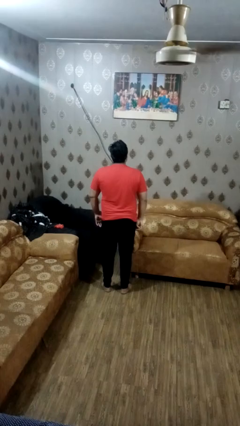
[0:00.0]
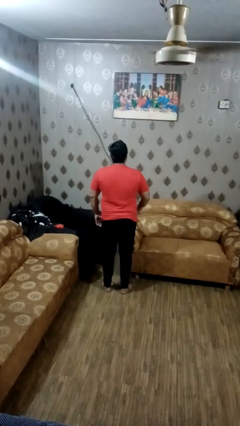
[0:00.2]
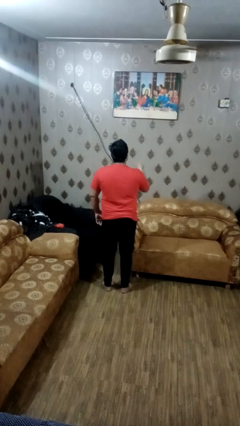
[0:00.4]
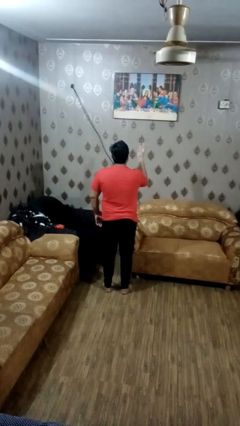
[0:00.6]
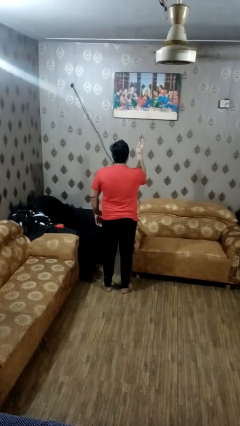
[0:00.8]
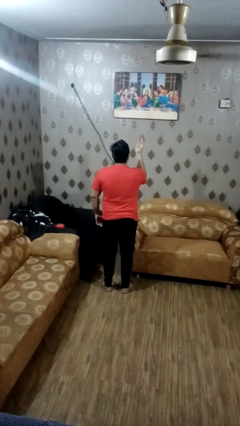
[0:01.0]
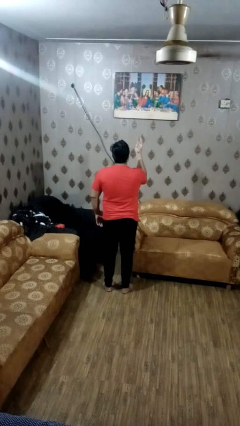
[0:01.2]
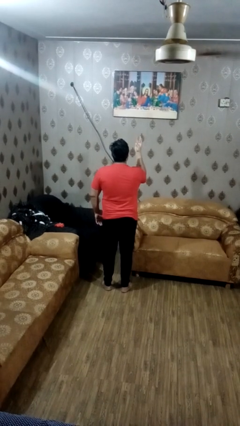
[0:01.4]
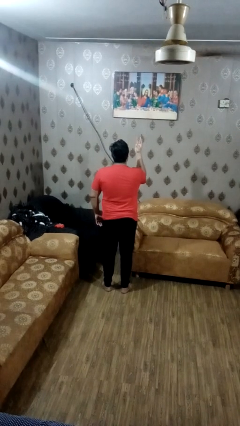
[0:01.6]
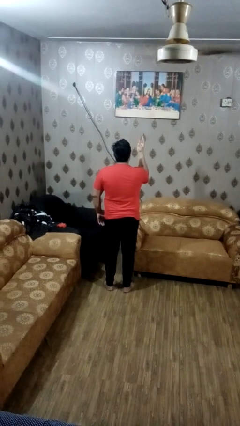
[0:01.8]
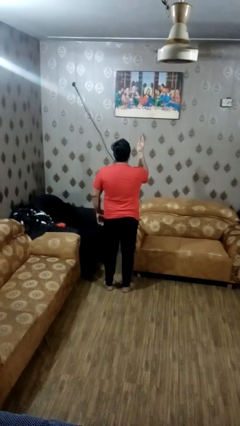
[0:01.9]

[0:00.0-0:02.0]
person gestures number three

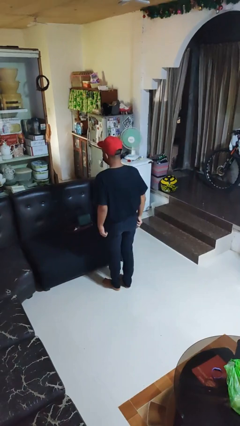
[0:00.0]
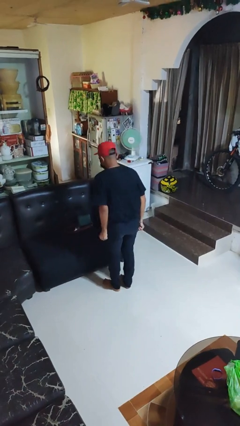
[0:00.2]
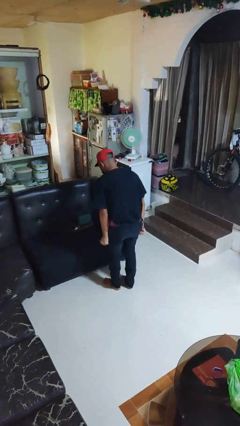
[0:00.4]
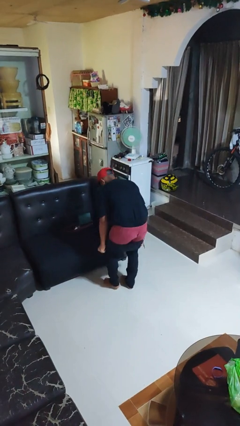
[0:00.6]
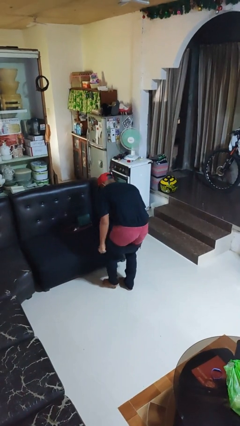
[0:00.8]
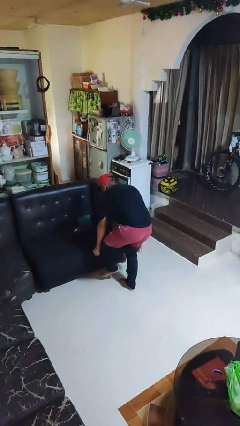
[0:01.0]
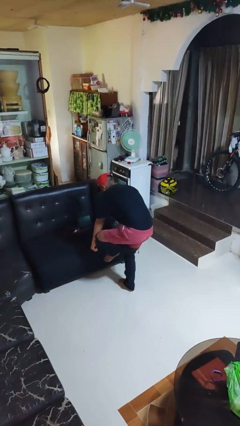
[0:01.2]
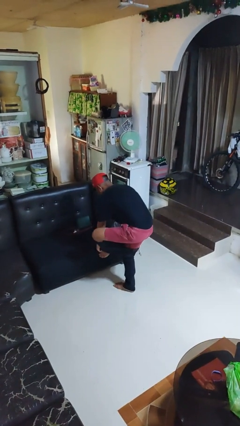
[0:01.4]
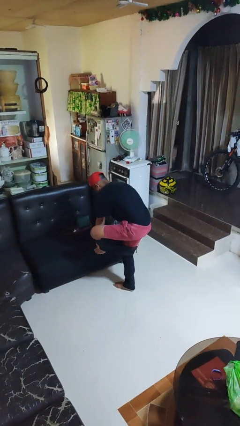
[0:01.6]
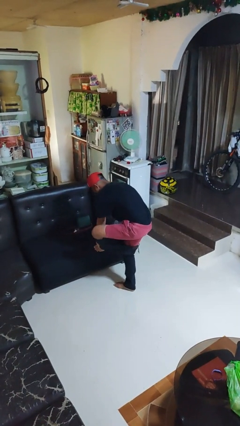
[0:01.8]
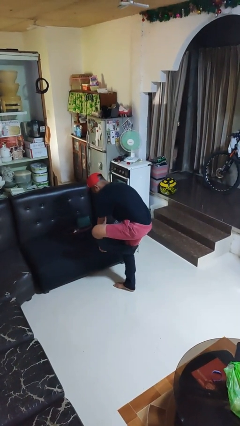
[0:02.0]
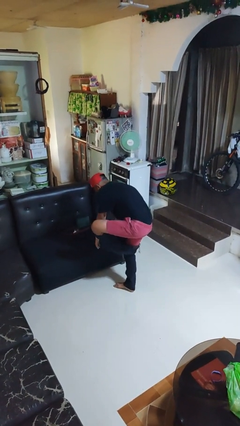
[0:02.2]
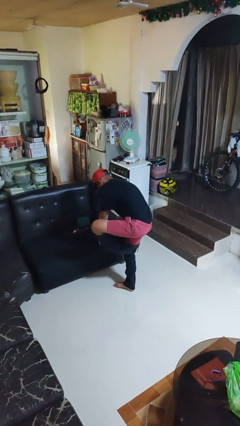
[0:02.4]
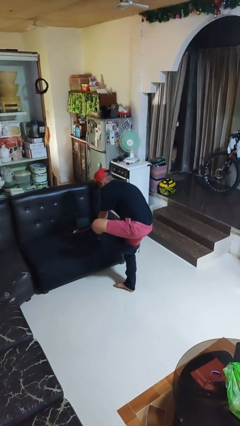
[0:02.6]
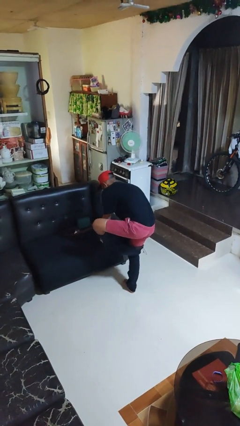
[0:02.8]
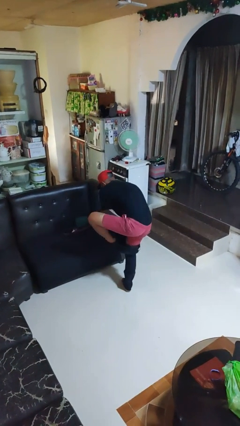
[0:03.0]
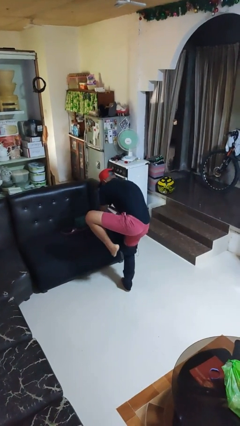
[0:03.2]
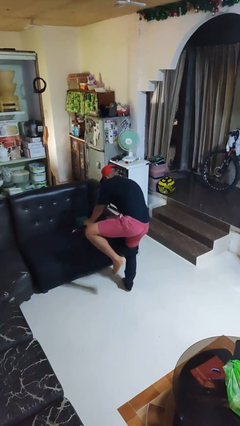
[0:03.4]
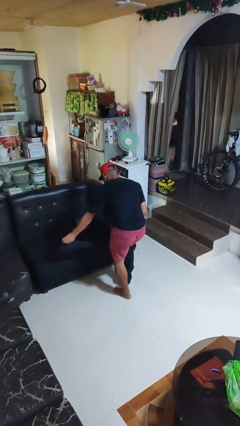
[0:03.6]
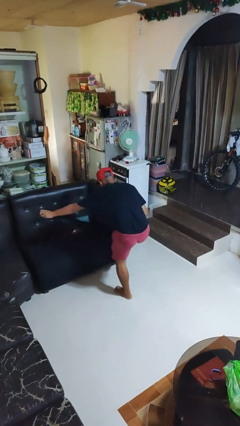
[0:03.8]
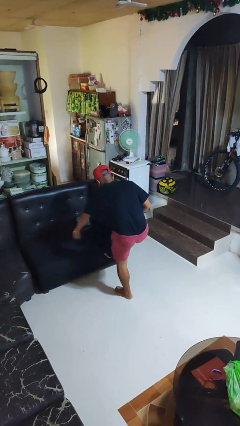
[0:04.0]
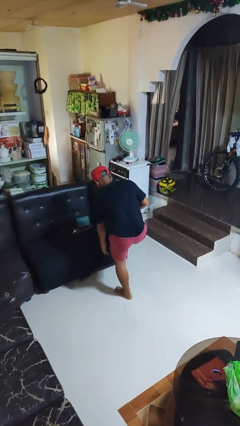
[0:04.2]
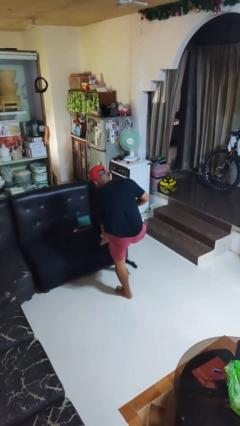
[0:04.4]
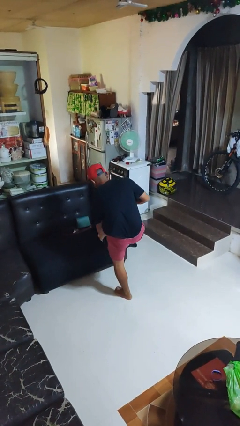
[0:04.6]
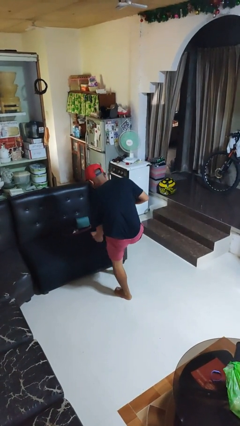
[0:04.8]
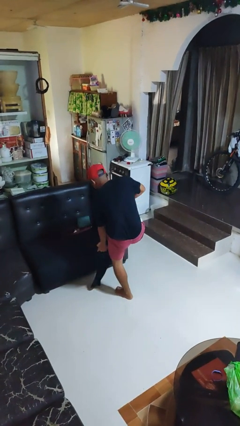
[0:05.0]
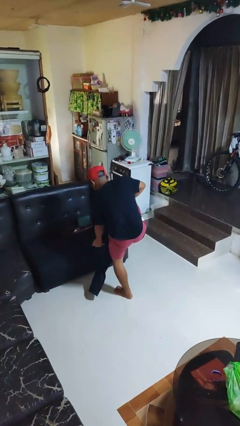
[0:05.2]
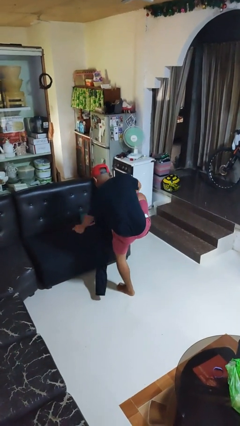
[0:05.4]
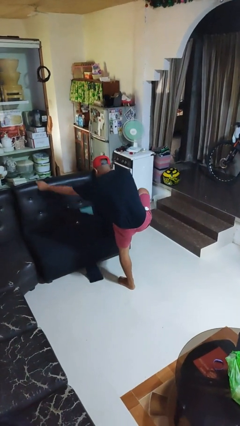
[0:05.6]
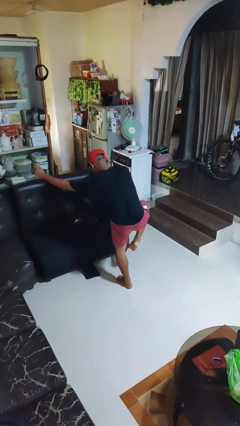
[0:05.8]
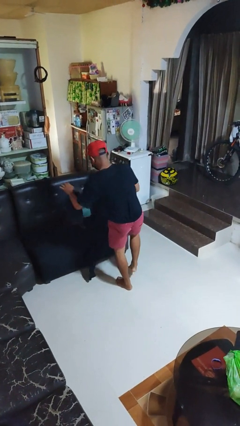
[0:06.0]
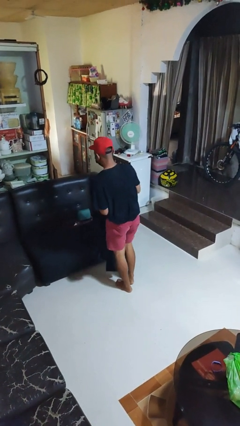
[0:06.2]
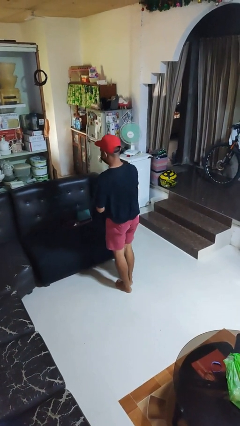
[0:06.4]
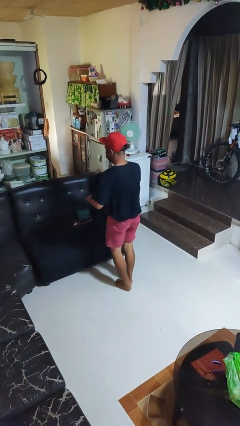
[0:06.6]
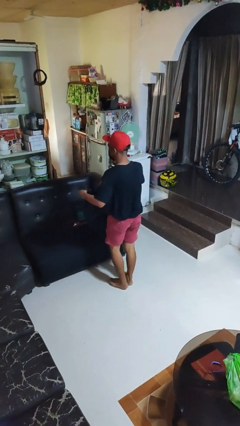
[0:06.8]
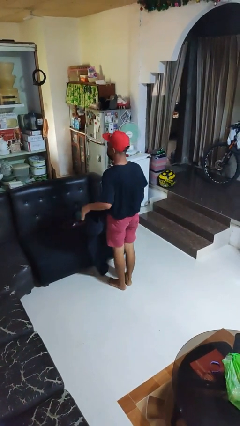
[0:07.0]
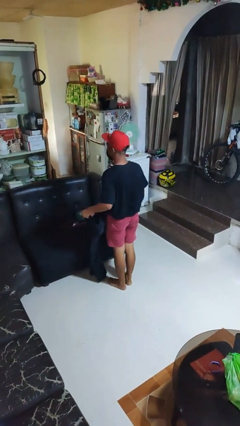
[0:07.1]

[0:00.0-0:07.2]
person takes off pants

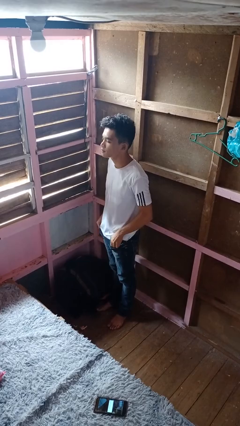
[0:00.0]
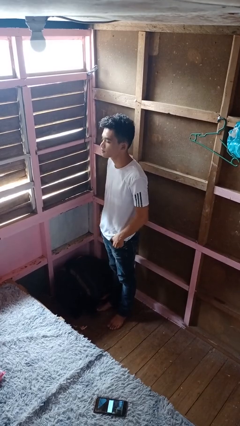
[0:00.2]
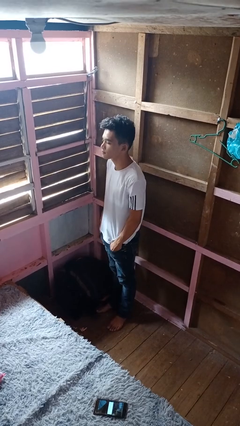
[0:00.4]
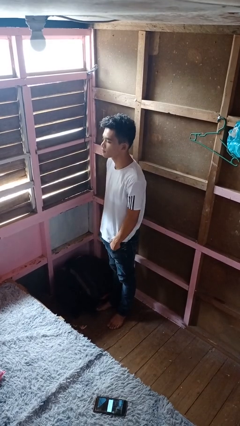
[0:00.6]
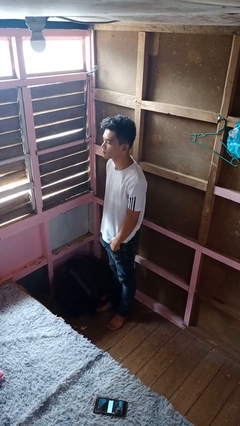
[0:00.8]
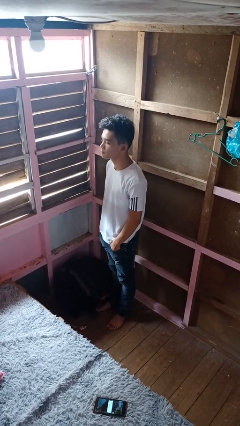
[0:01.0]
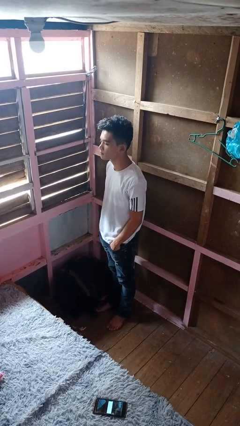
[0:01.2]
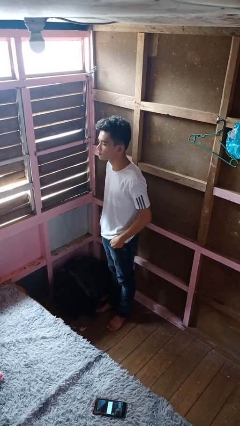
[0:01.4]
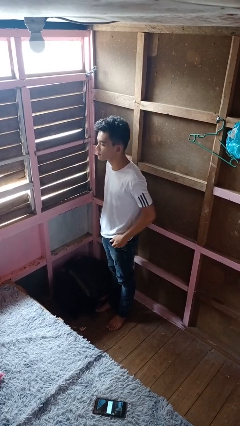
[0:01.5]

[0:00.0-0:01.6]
person puts hands in back pockets

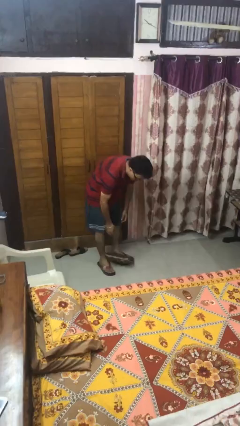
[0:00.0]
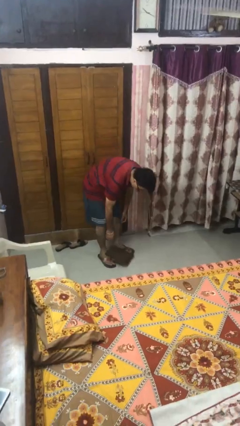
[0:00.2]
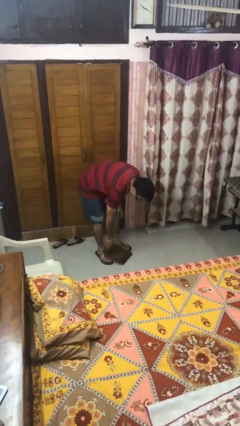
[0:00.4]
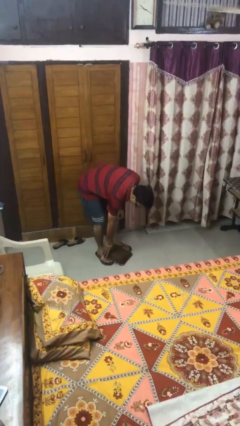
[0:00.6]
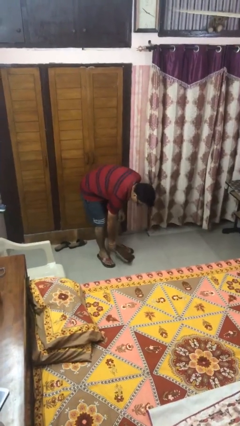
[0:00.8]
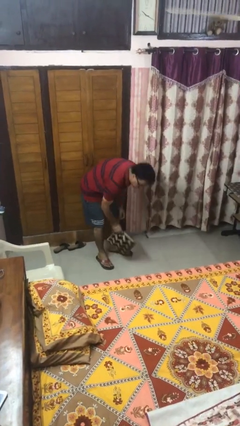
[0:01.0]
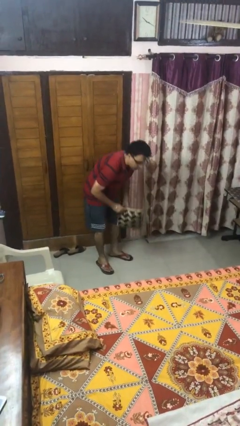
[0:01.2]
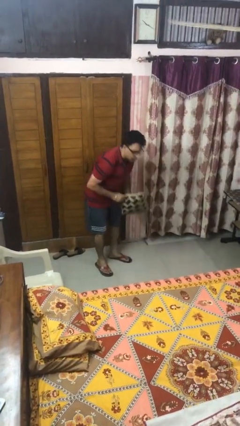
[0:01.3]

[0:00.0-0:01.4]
person picks up object from floor

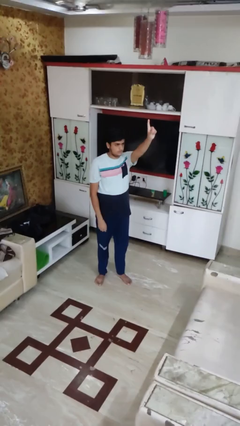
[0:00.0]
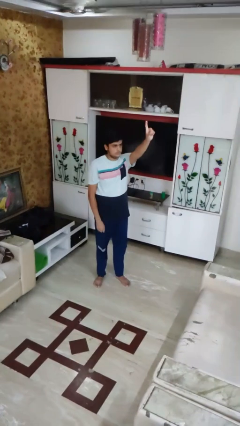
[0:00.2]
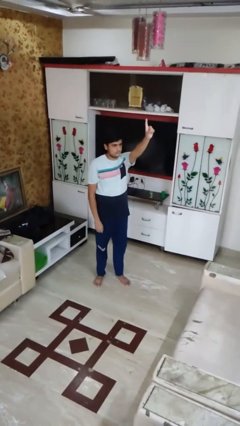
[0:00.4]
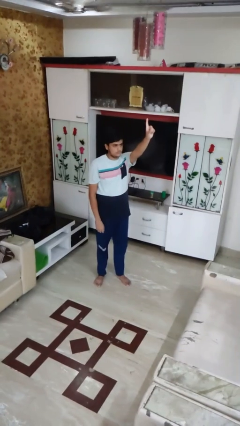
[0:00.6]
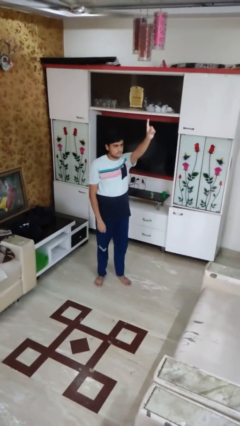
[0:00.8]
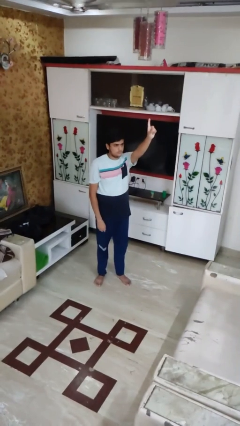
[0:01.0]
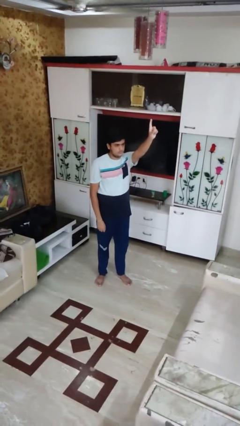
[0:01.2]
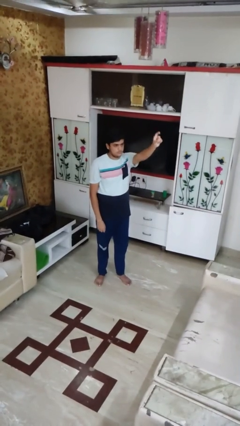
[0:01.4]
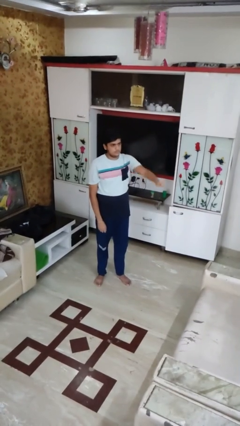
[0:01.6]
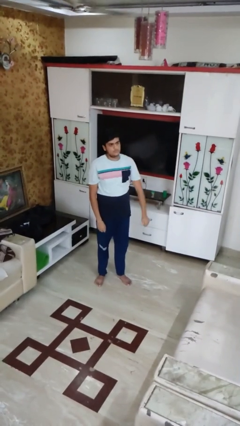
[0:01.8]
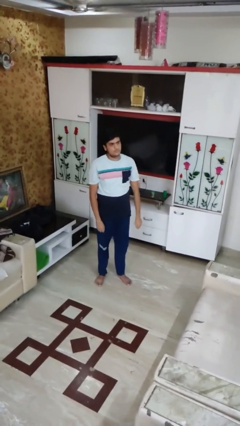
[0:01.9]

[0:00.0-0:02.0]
person gestures number one

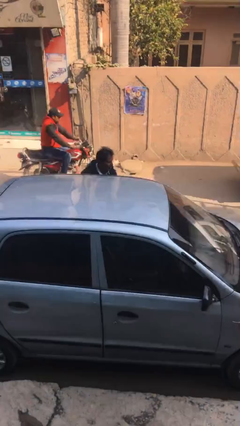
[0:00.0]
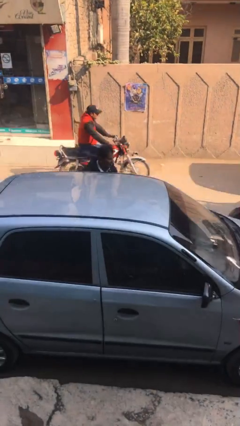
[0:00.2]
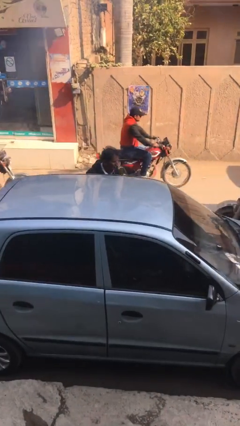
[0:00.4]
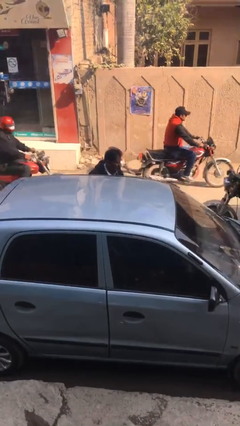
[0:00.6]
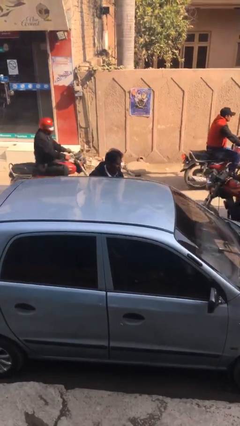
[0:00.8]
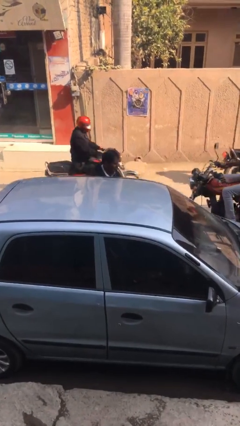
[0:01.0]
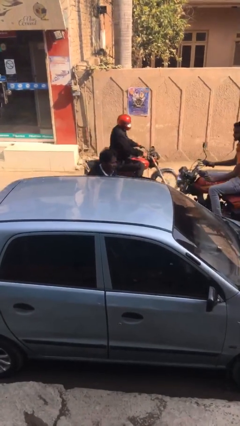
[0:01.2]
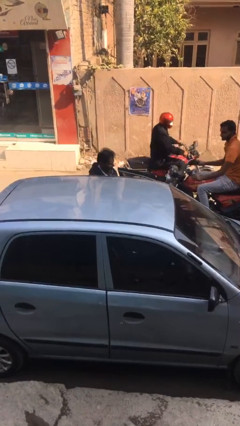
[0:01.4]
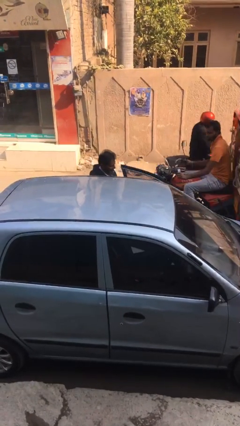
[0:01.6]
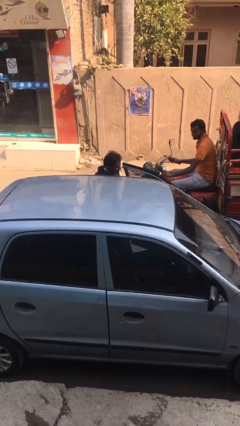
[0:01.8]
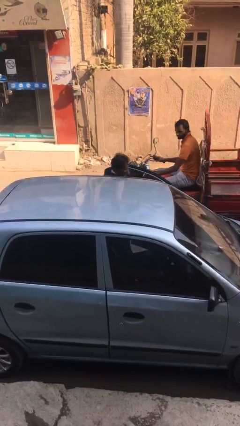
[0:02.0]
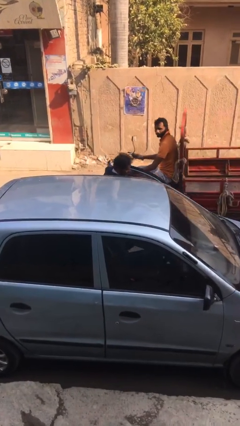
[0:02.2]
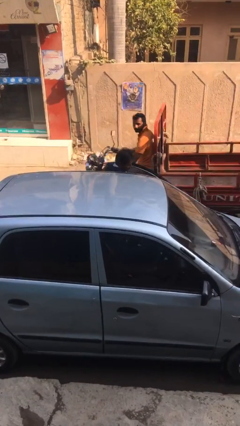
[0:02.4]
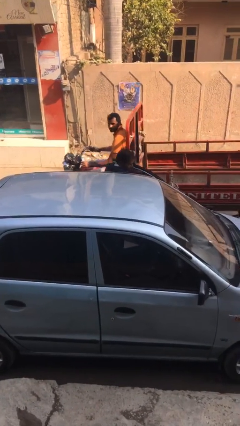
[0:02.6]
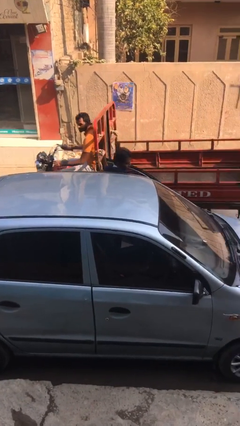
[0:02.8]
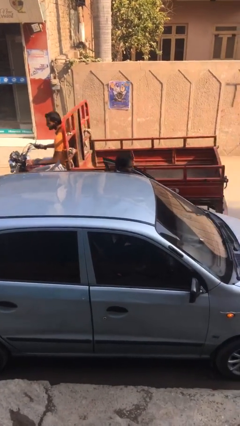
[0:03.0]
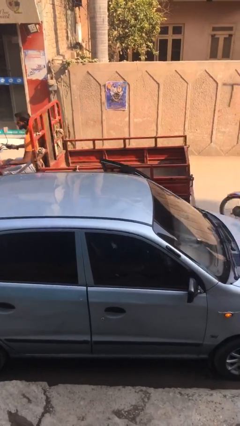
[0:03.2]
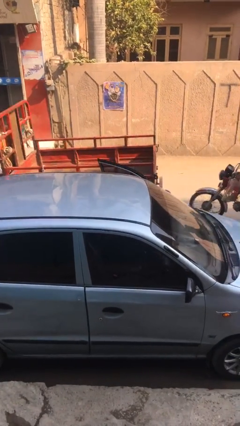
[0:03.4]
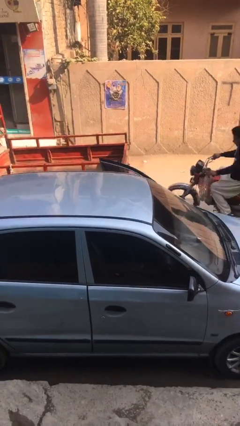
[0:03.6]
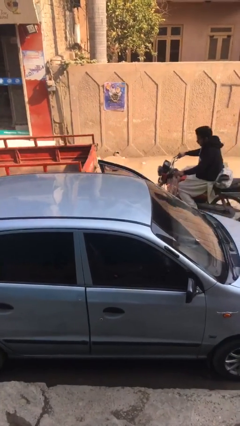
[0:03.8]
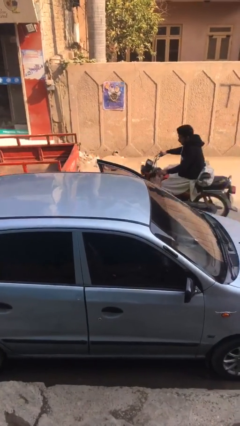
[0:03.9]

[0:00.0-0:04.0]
person enters car
